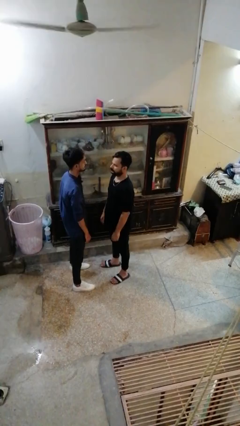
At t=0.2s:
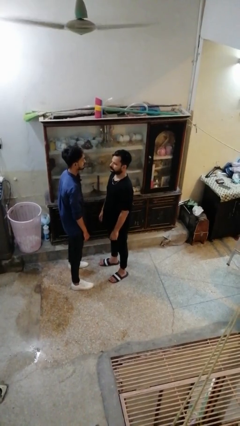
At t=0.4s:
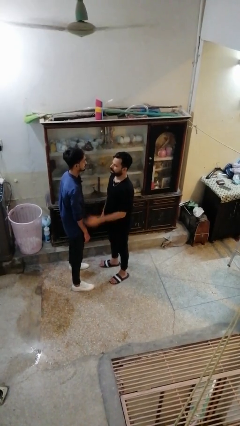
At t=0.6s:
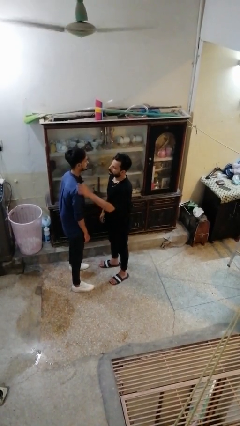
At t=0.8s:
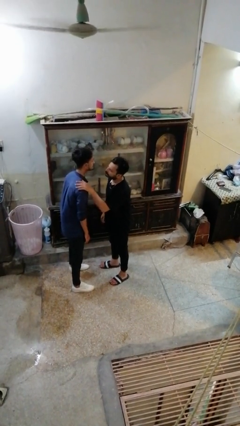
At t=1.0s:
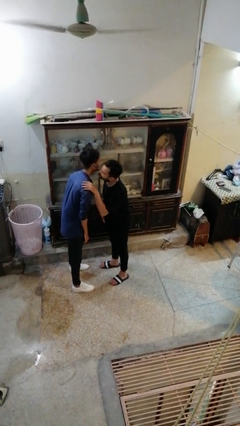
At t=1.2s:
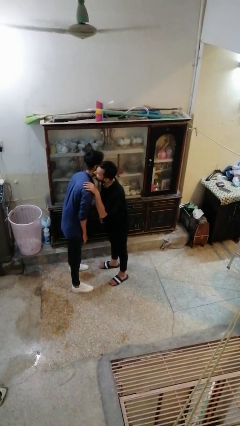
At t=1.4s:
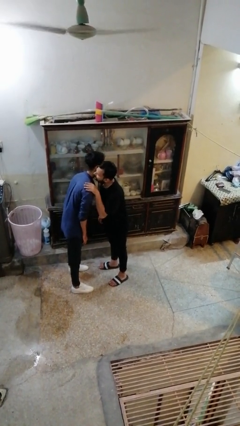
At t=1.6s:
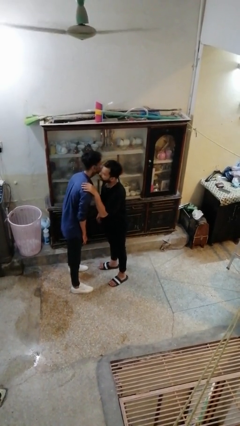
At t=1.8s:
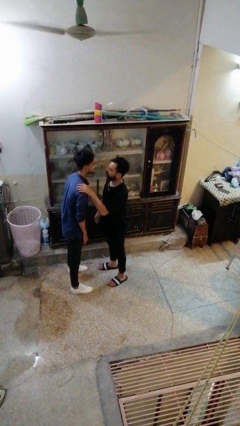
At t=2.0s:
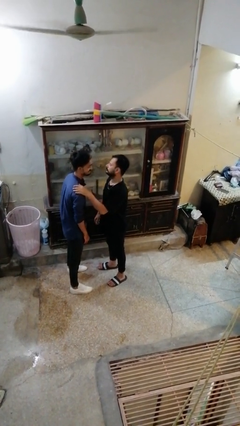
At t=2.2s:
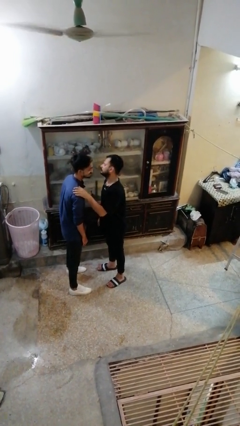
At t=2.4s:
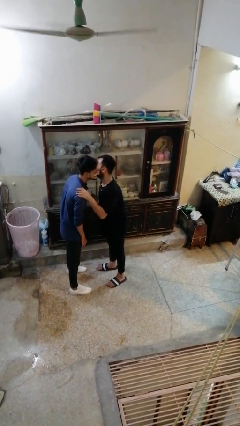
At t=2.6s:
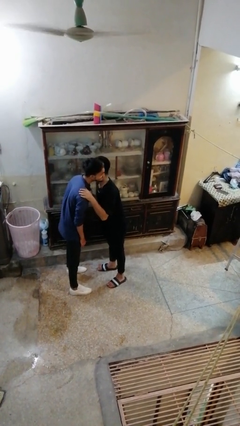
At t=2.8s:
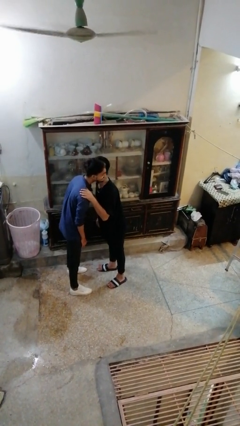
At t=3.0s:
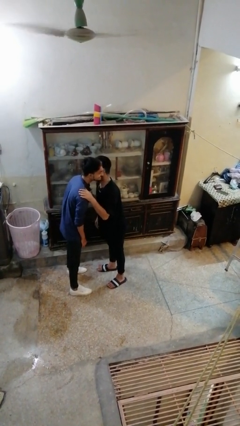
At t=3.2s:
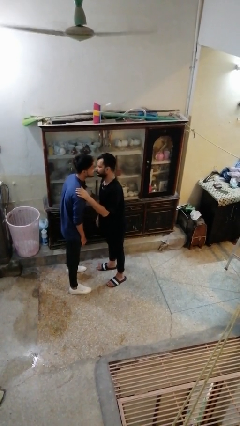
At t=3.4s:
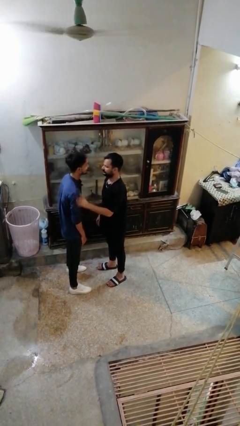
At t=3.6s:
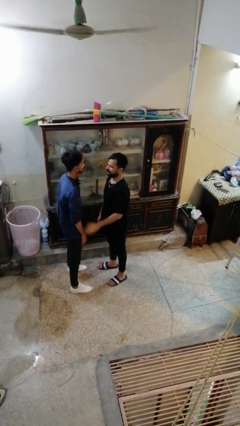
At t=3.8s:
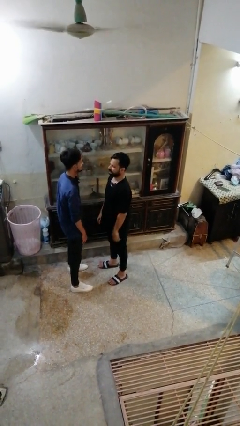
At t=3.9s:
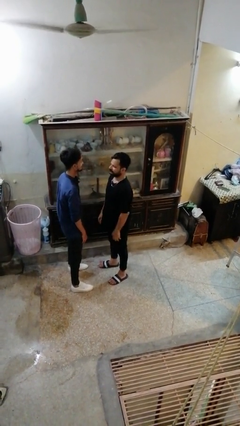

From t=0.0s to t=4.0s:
person kisses cheek of person

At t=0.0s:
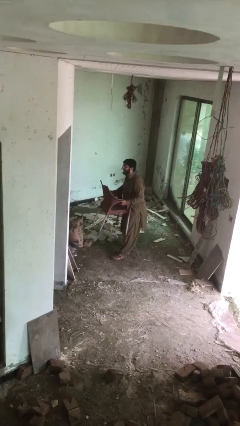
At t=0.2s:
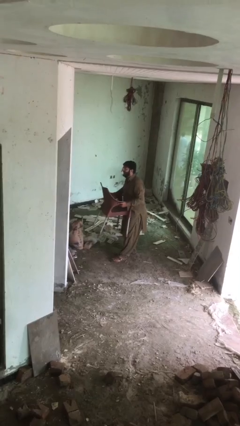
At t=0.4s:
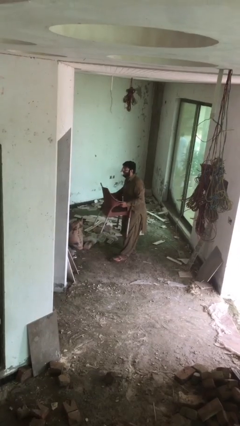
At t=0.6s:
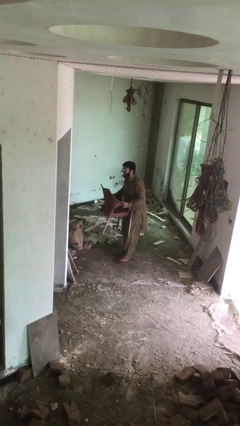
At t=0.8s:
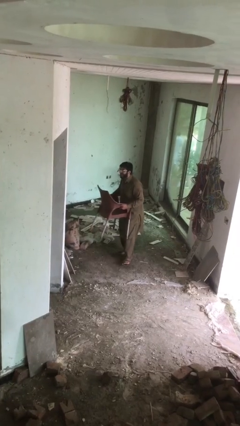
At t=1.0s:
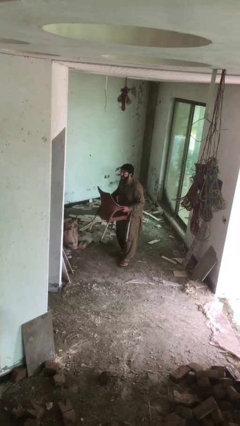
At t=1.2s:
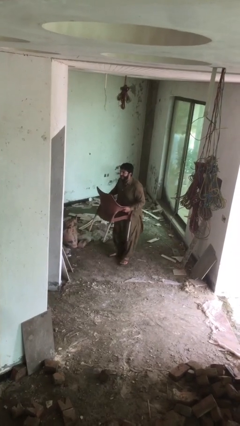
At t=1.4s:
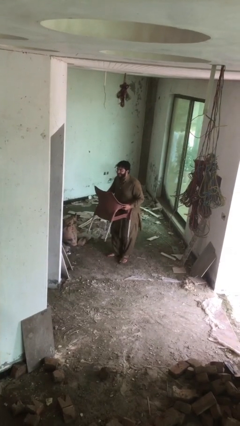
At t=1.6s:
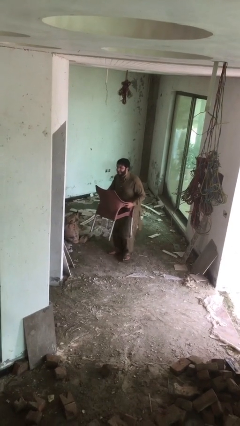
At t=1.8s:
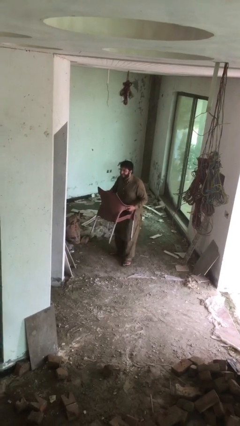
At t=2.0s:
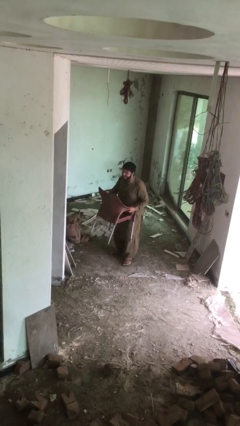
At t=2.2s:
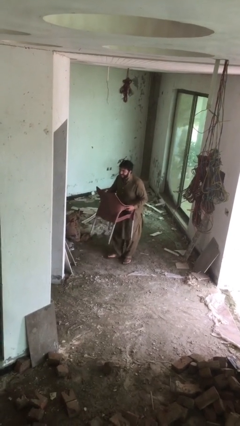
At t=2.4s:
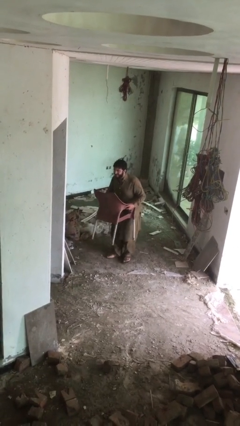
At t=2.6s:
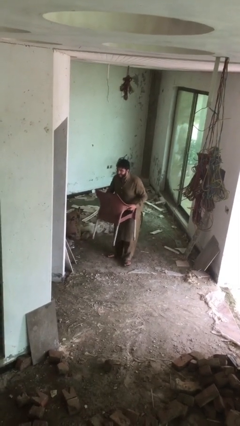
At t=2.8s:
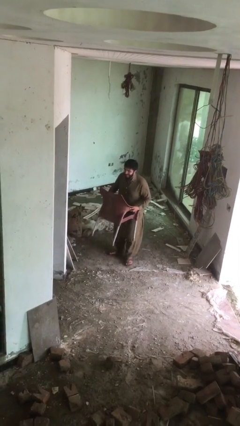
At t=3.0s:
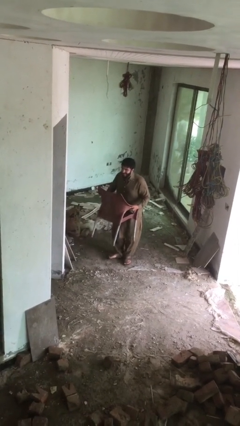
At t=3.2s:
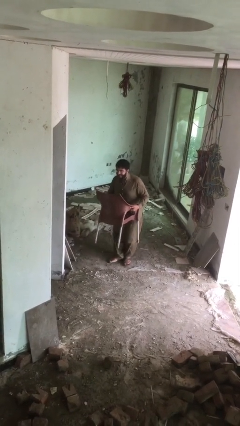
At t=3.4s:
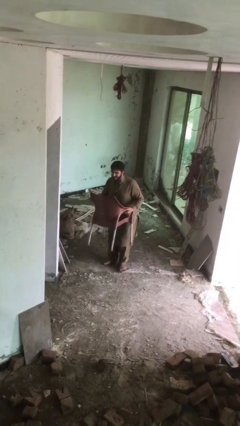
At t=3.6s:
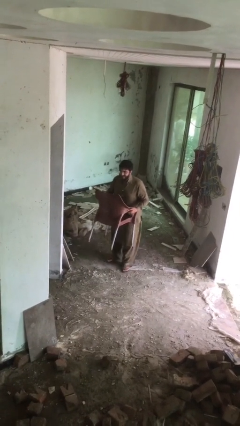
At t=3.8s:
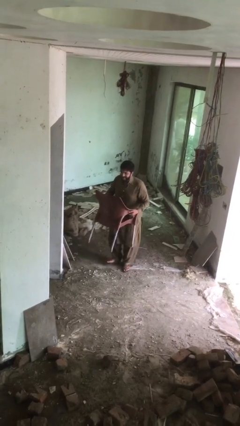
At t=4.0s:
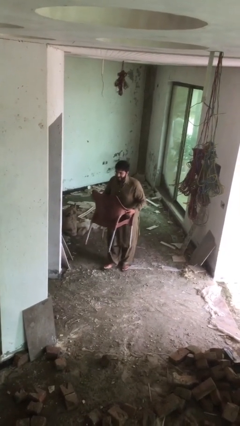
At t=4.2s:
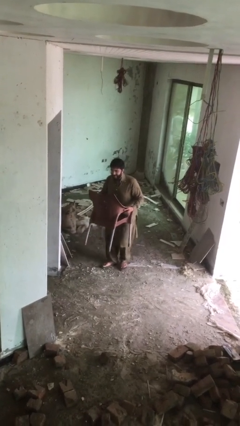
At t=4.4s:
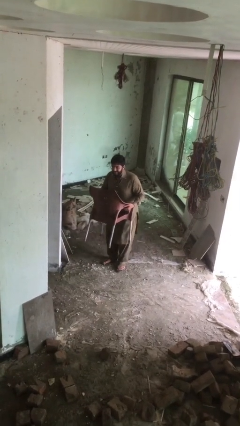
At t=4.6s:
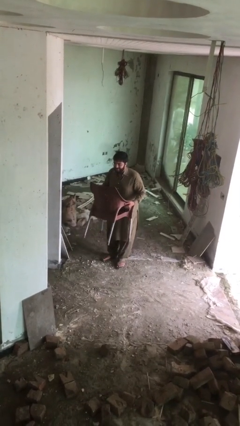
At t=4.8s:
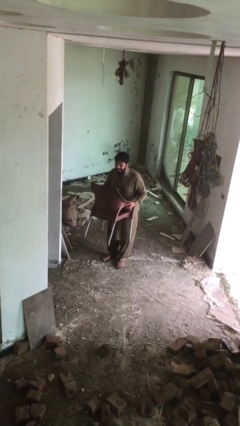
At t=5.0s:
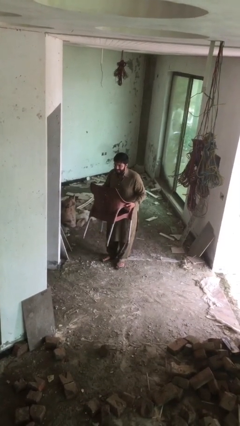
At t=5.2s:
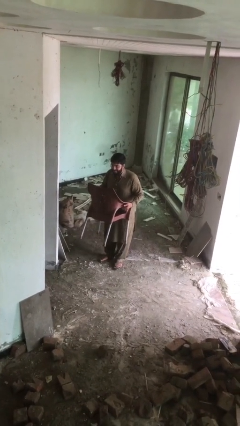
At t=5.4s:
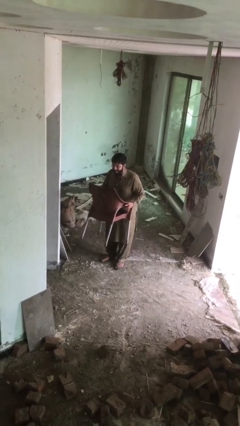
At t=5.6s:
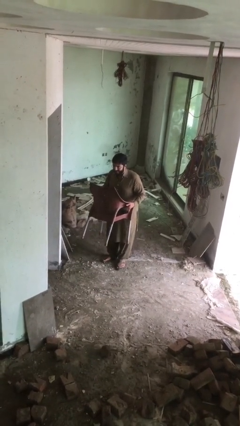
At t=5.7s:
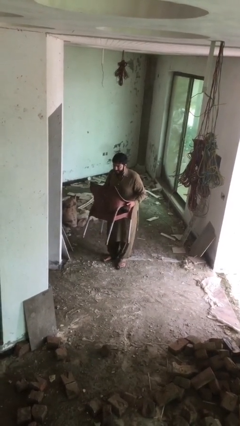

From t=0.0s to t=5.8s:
person carries heavy object

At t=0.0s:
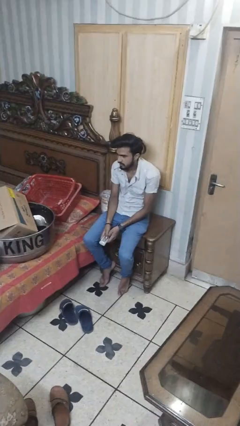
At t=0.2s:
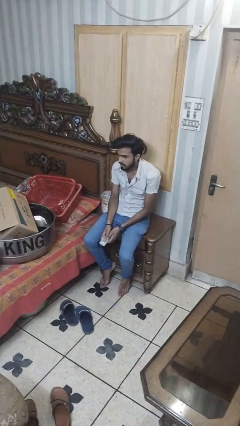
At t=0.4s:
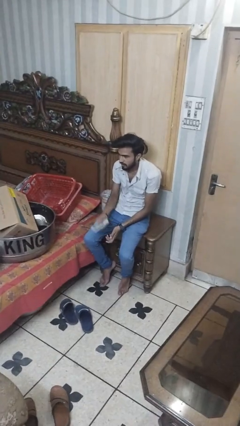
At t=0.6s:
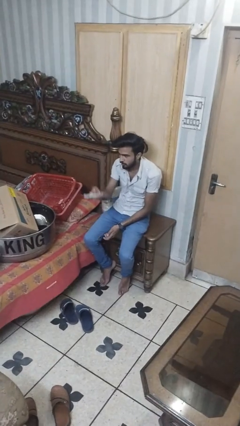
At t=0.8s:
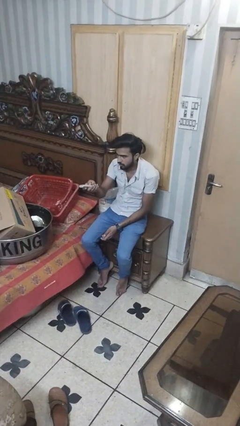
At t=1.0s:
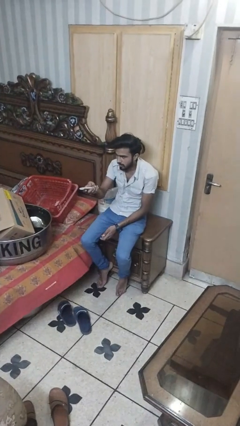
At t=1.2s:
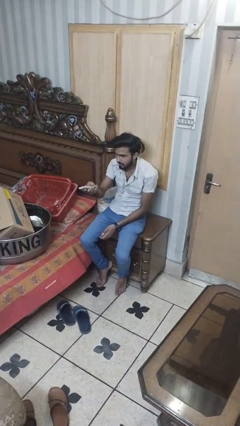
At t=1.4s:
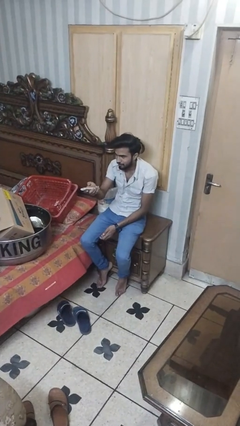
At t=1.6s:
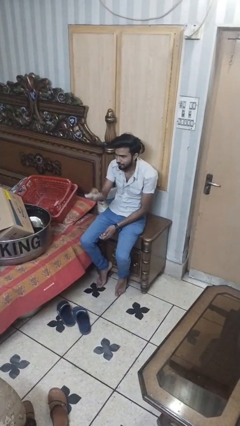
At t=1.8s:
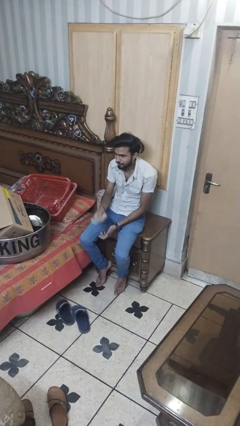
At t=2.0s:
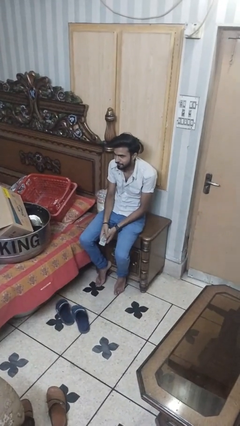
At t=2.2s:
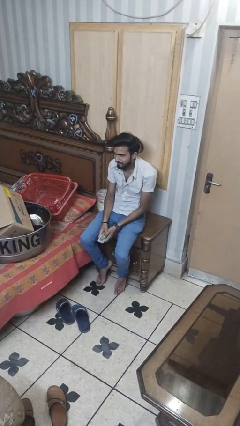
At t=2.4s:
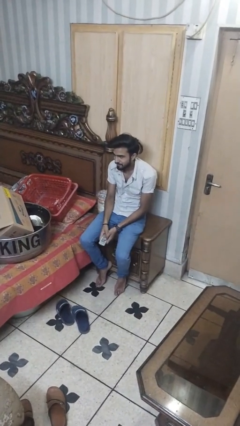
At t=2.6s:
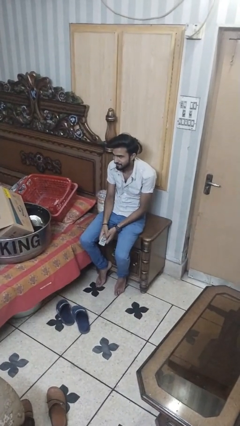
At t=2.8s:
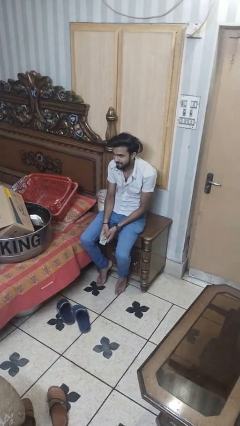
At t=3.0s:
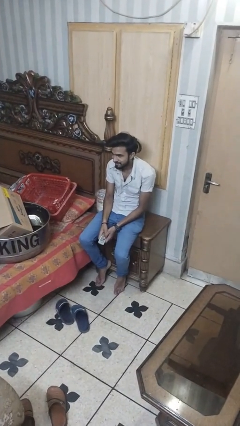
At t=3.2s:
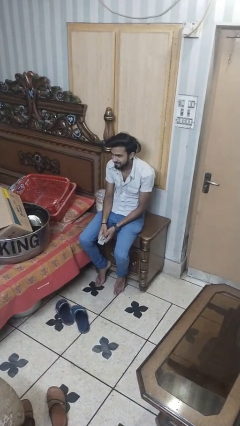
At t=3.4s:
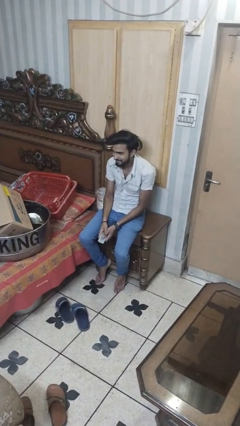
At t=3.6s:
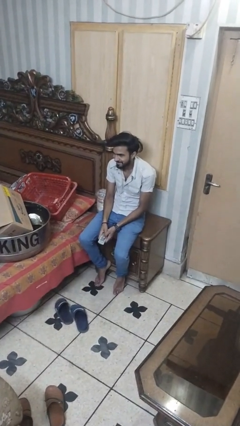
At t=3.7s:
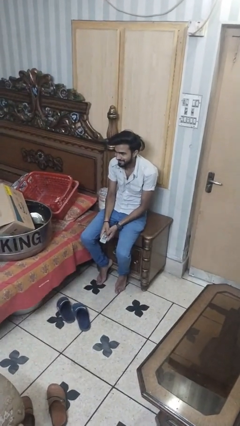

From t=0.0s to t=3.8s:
person uses television remote

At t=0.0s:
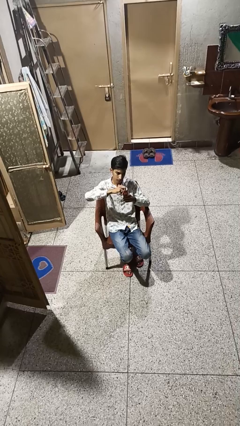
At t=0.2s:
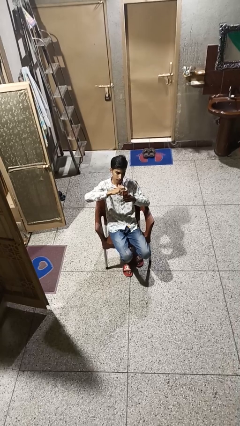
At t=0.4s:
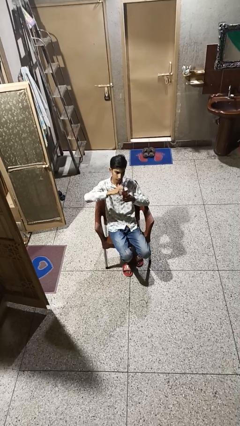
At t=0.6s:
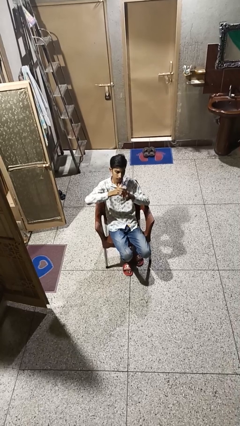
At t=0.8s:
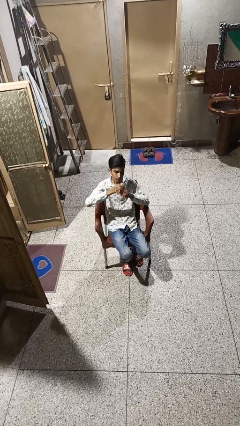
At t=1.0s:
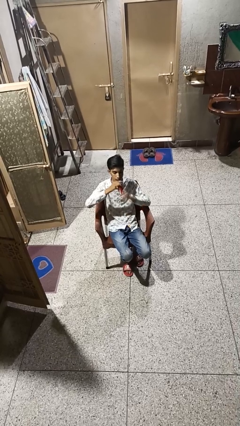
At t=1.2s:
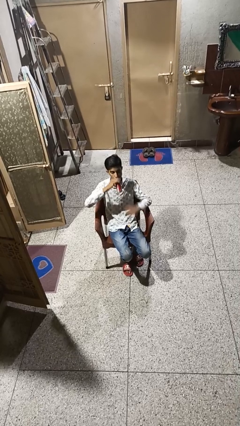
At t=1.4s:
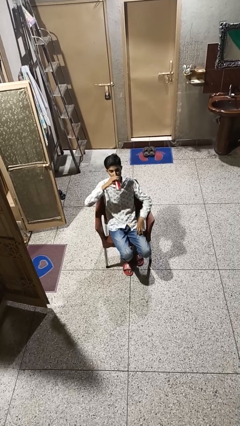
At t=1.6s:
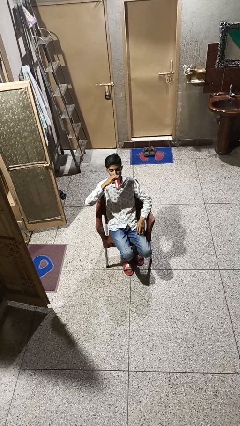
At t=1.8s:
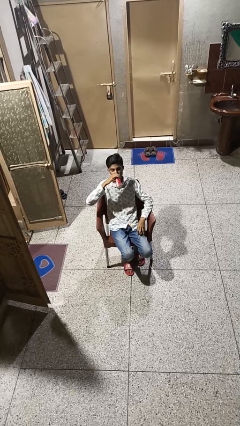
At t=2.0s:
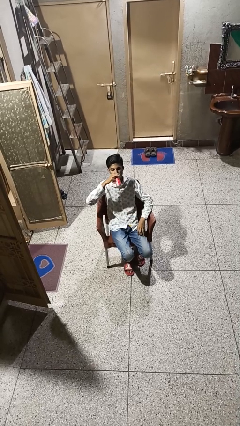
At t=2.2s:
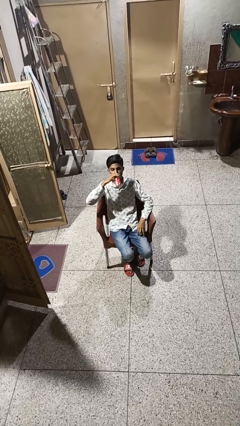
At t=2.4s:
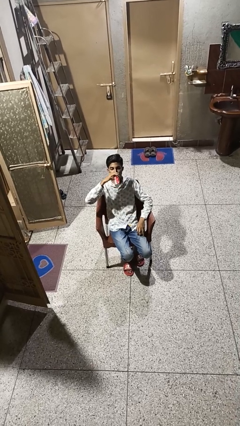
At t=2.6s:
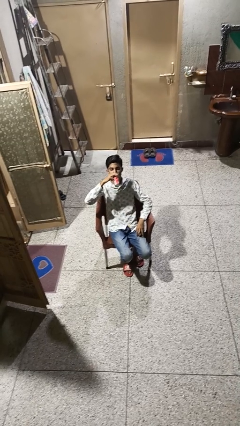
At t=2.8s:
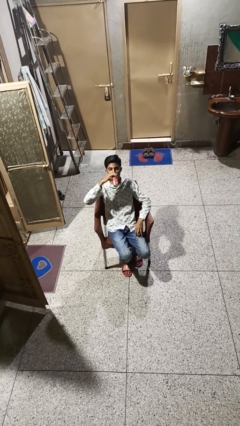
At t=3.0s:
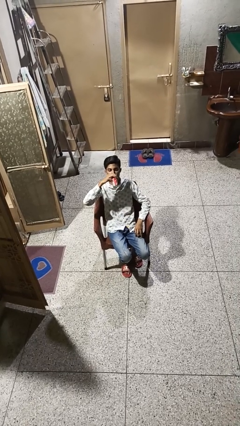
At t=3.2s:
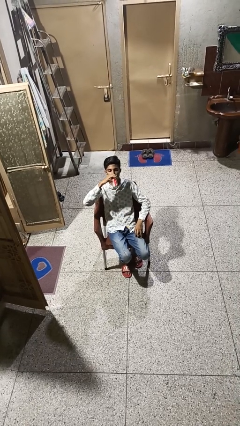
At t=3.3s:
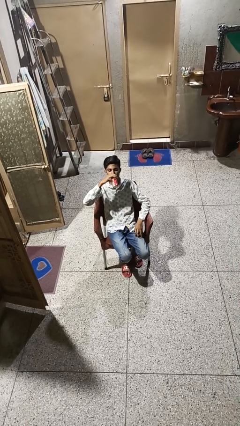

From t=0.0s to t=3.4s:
person drinks from beverage can

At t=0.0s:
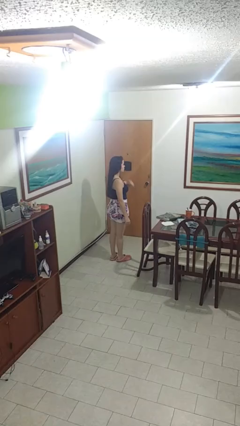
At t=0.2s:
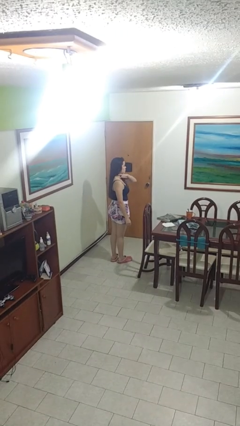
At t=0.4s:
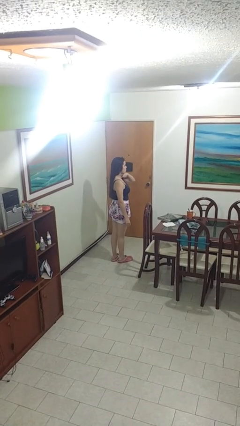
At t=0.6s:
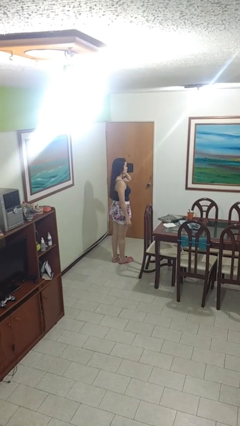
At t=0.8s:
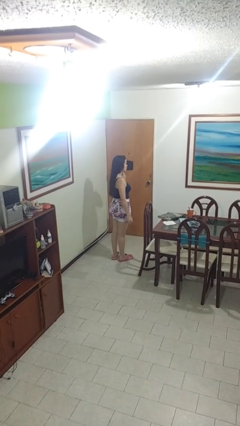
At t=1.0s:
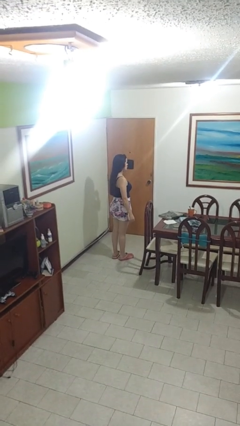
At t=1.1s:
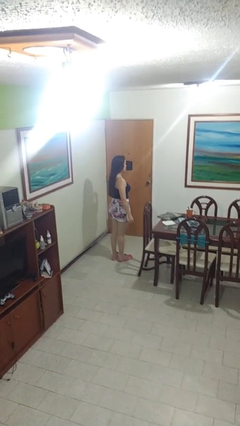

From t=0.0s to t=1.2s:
person gestures cut
